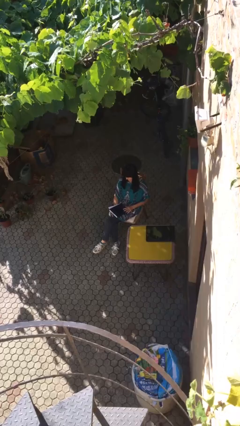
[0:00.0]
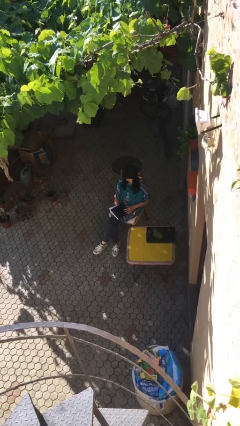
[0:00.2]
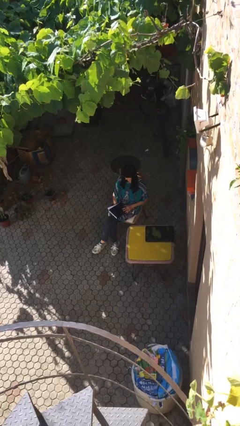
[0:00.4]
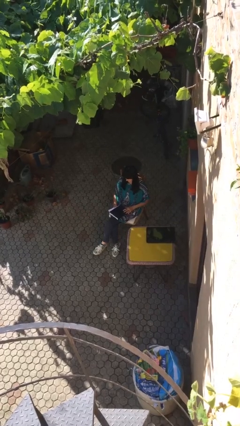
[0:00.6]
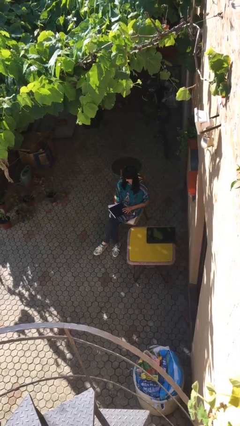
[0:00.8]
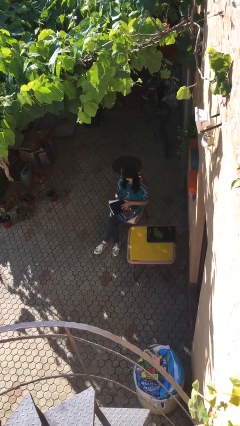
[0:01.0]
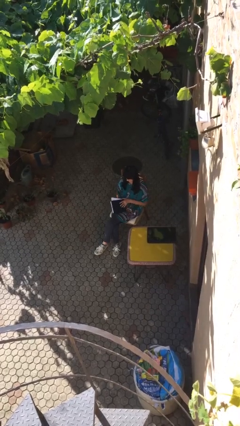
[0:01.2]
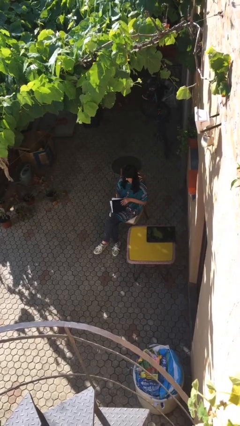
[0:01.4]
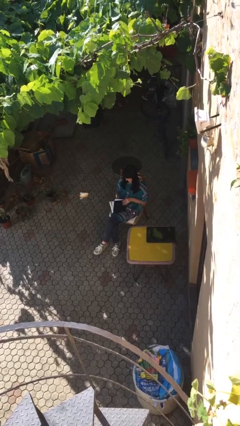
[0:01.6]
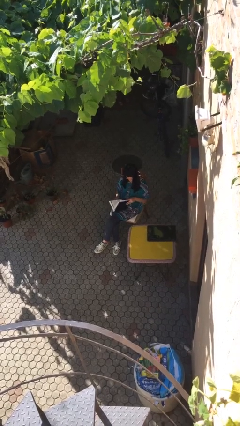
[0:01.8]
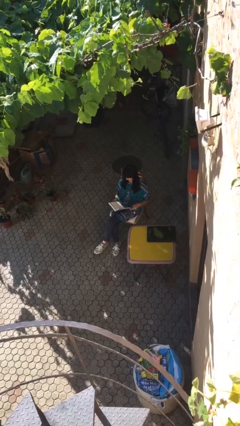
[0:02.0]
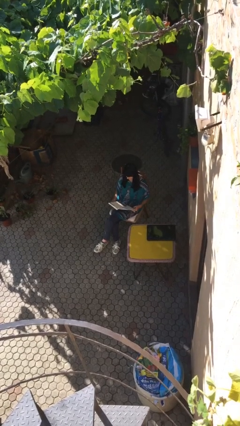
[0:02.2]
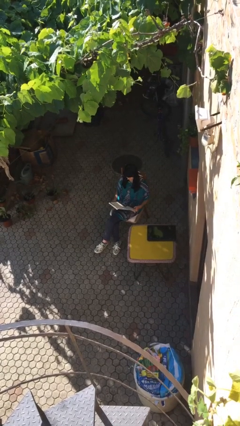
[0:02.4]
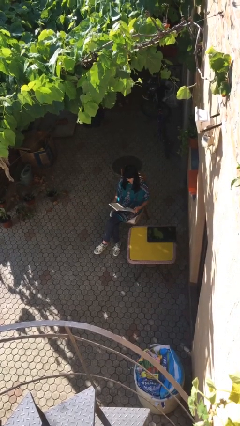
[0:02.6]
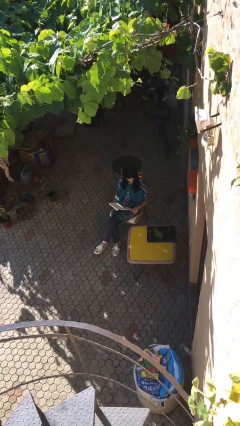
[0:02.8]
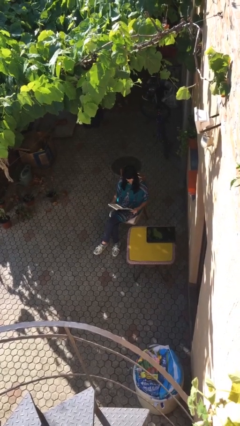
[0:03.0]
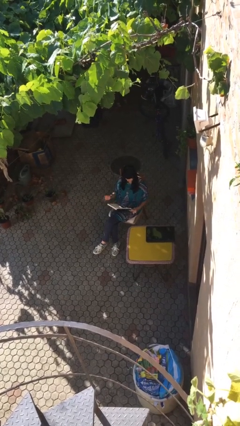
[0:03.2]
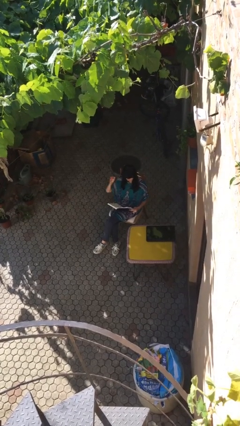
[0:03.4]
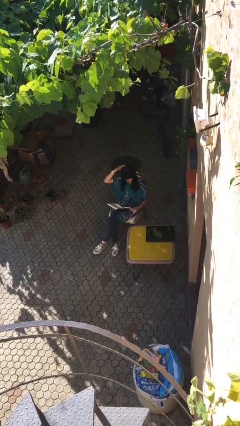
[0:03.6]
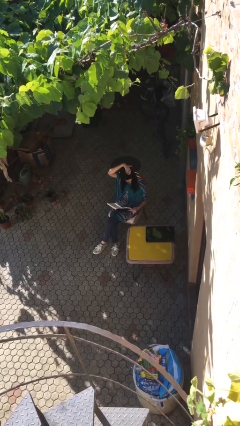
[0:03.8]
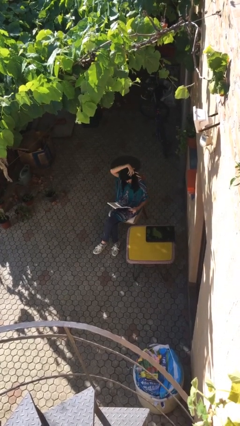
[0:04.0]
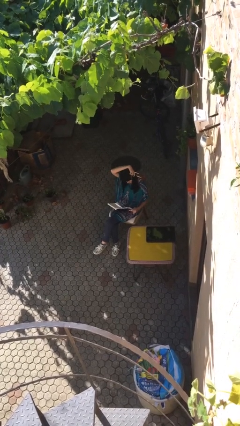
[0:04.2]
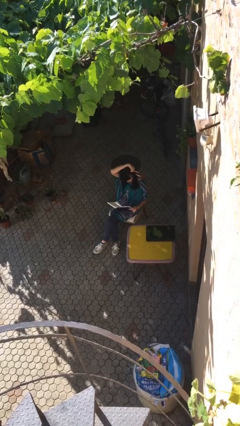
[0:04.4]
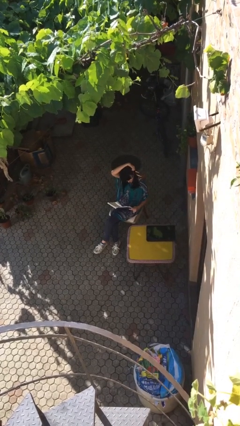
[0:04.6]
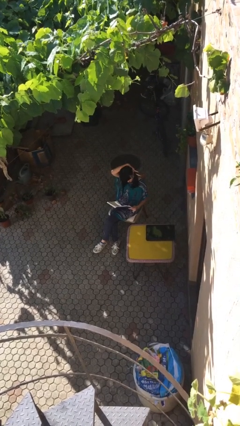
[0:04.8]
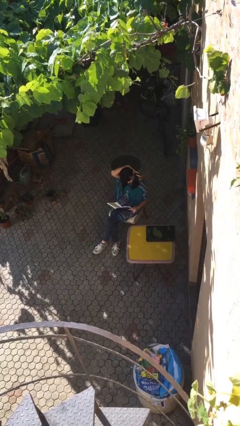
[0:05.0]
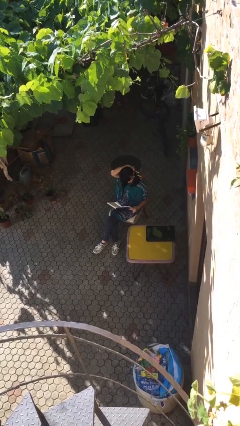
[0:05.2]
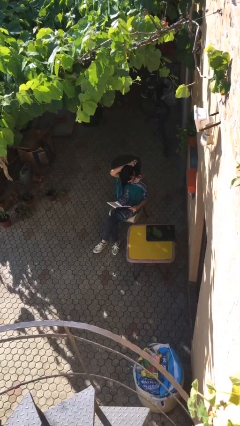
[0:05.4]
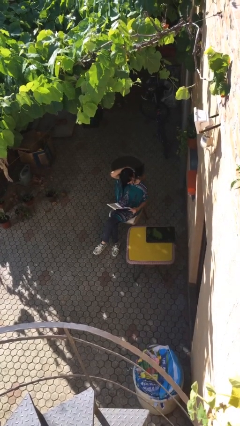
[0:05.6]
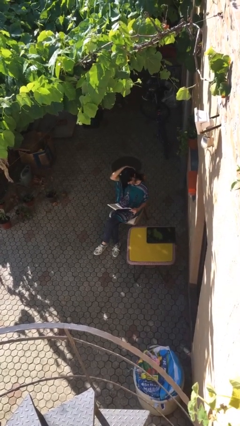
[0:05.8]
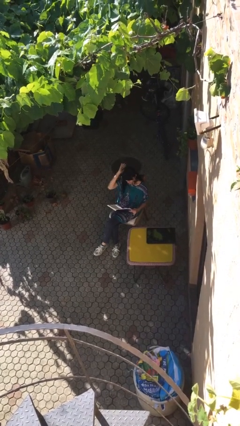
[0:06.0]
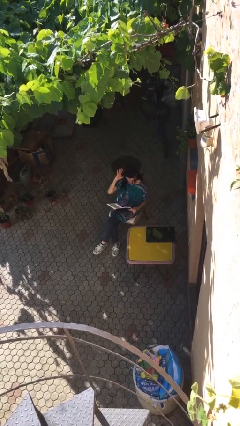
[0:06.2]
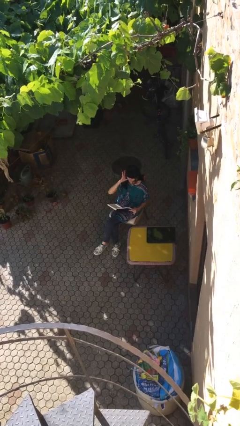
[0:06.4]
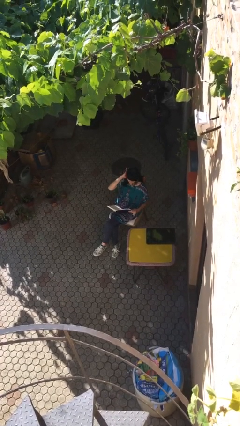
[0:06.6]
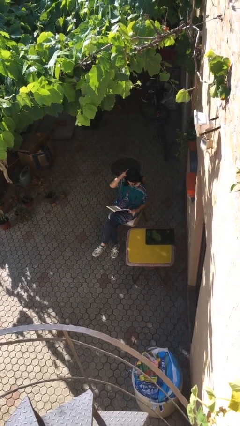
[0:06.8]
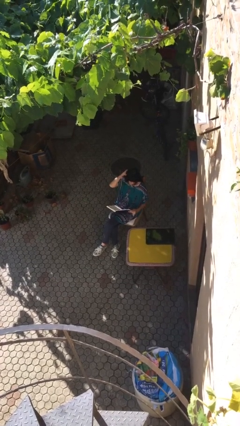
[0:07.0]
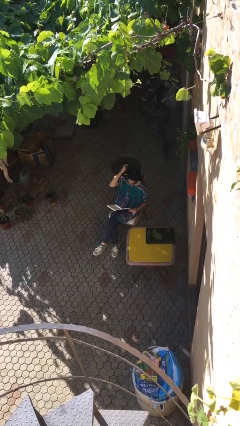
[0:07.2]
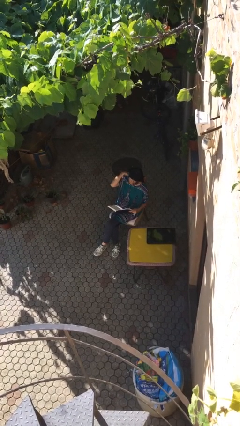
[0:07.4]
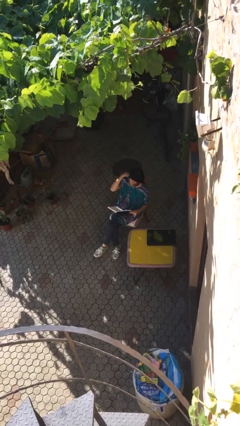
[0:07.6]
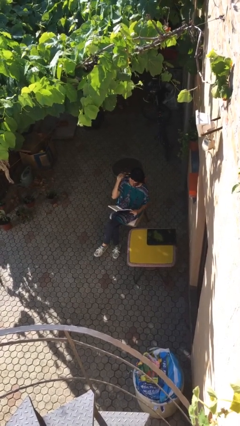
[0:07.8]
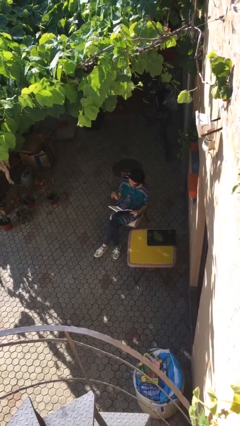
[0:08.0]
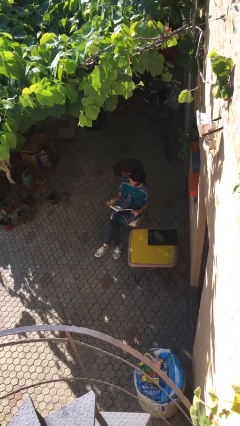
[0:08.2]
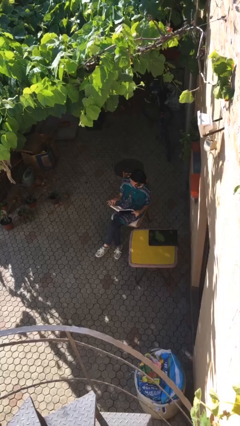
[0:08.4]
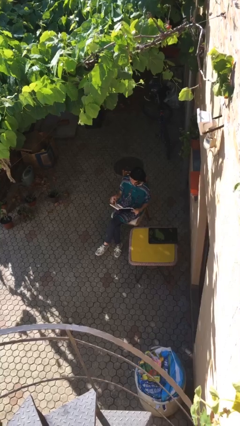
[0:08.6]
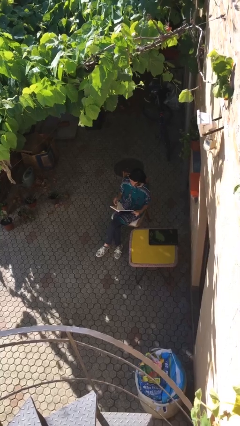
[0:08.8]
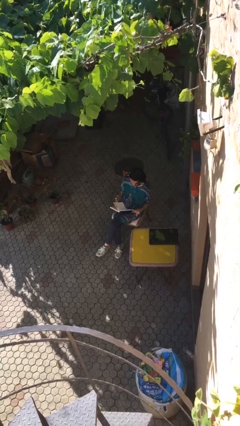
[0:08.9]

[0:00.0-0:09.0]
person reads document

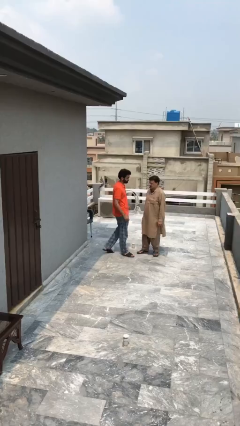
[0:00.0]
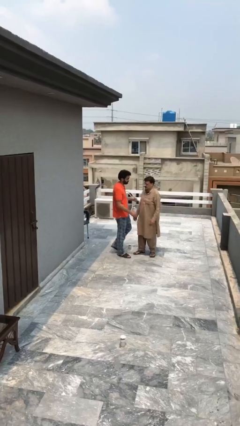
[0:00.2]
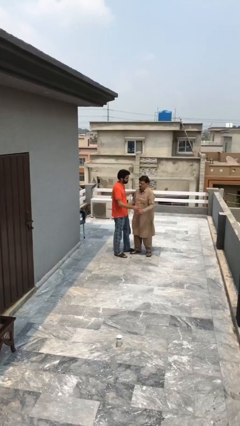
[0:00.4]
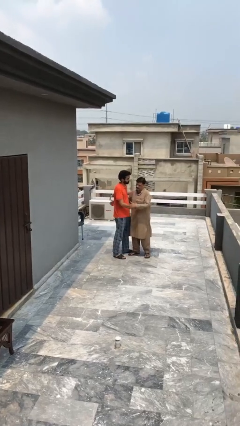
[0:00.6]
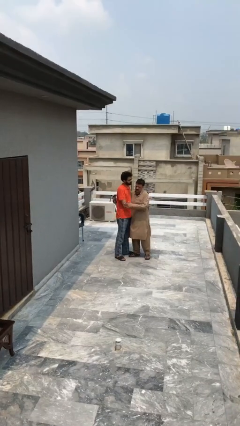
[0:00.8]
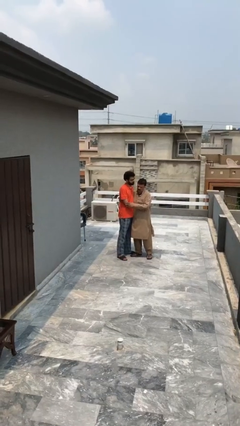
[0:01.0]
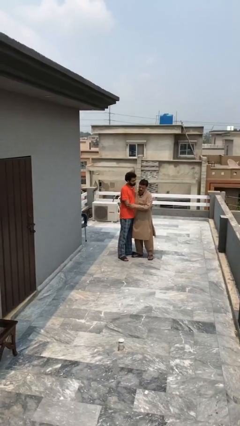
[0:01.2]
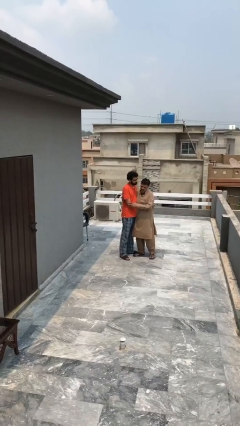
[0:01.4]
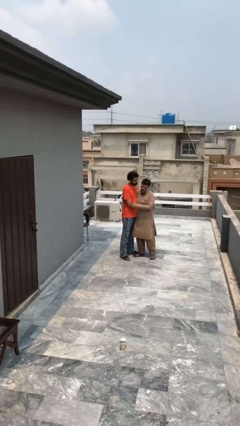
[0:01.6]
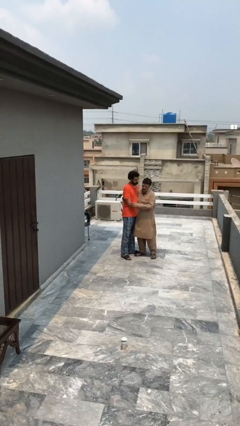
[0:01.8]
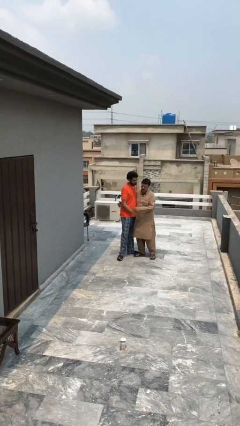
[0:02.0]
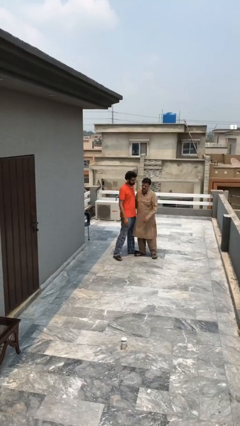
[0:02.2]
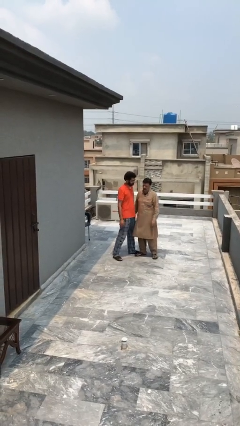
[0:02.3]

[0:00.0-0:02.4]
person embraces person

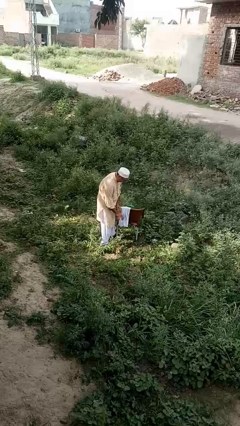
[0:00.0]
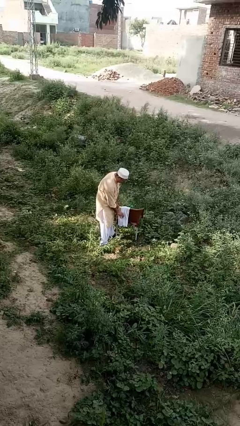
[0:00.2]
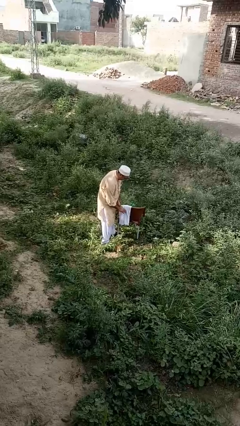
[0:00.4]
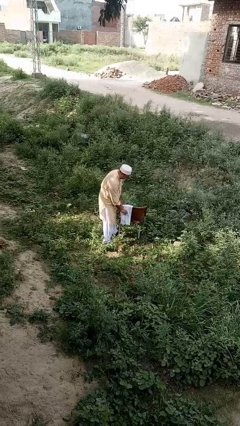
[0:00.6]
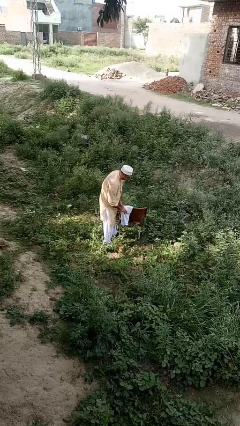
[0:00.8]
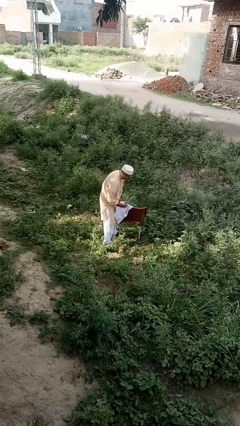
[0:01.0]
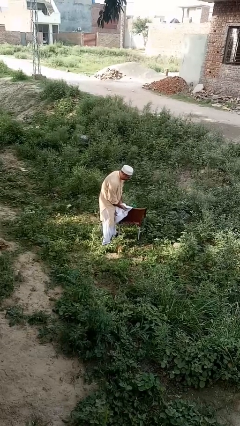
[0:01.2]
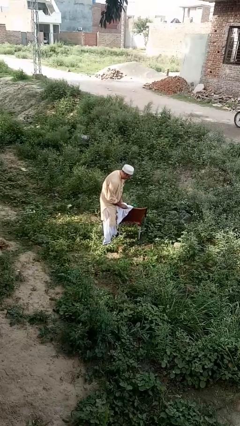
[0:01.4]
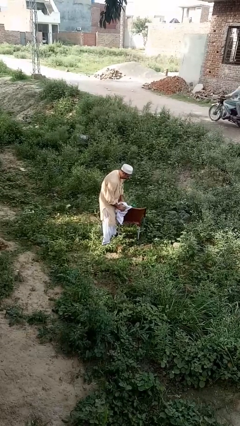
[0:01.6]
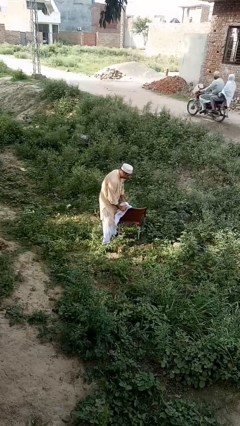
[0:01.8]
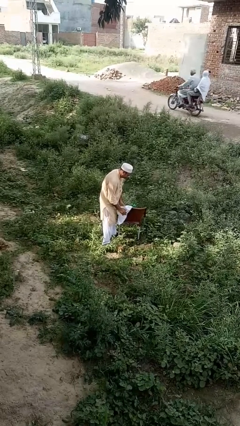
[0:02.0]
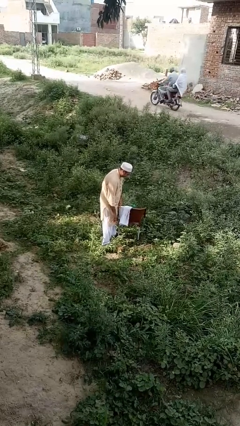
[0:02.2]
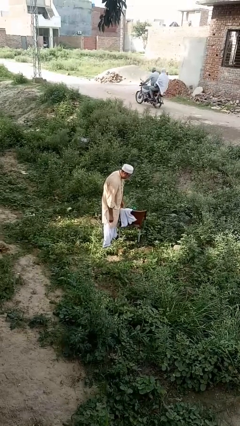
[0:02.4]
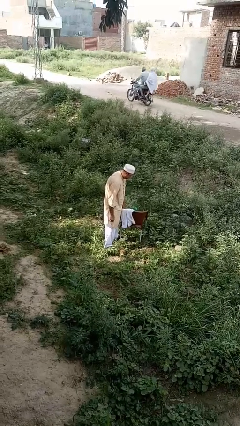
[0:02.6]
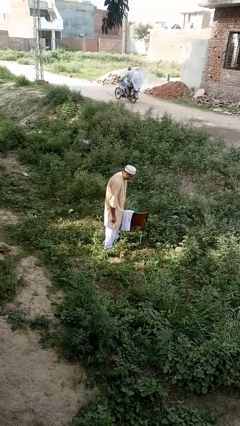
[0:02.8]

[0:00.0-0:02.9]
person dries hands with towel

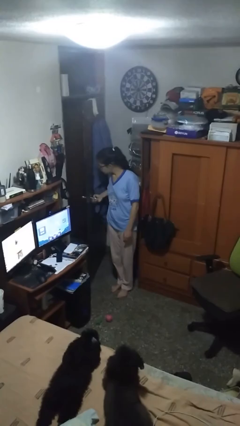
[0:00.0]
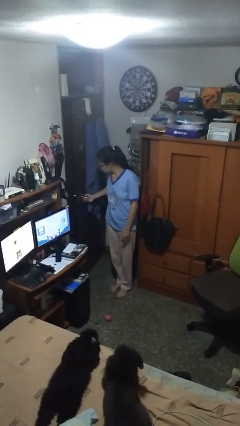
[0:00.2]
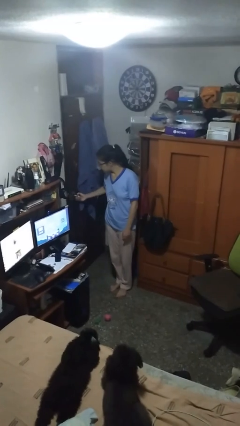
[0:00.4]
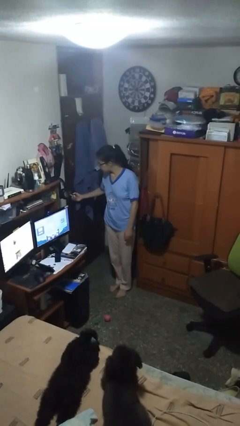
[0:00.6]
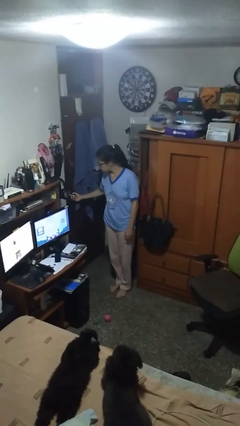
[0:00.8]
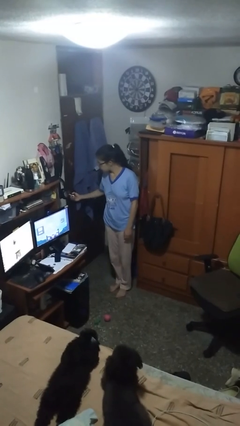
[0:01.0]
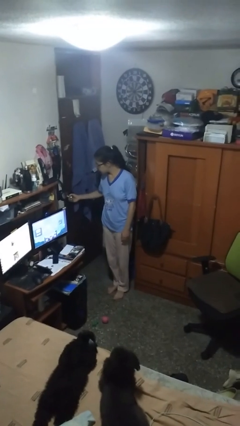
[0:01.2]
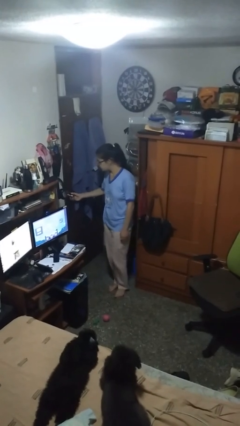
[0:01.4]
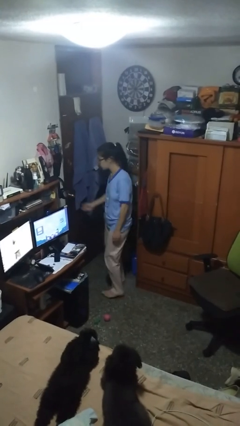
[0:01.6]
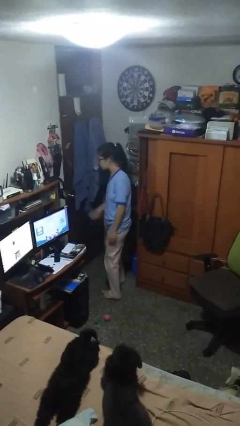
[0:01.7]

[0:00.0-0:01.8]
person closes facility door

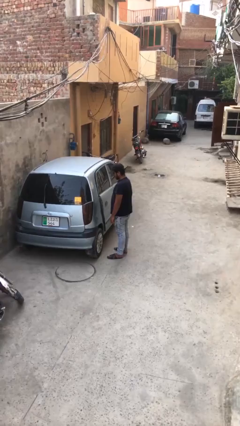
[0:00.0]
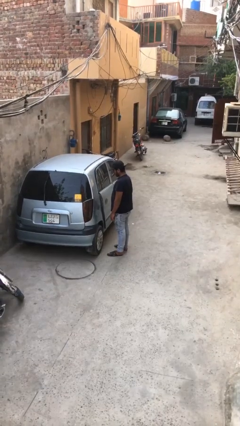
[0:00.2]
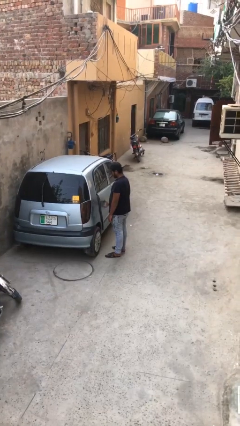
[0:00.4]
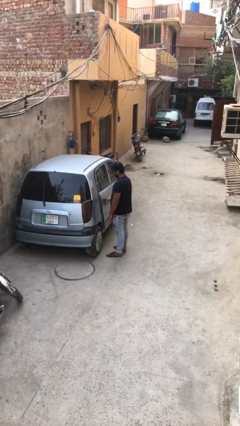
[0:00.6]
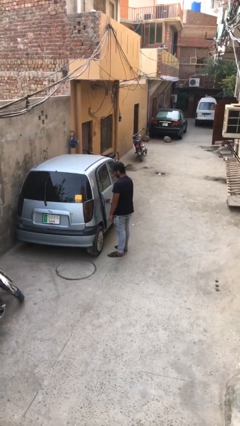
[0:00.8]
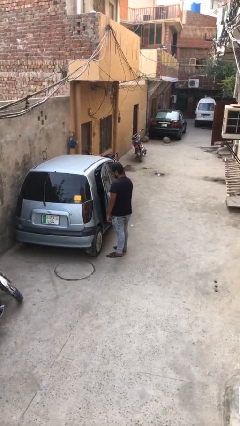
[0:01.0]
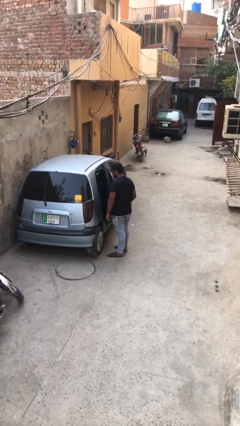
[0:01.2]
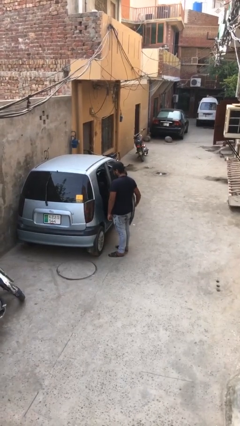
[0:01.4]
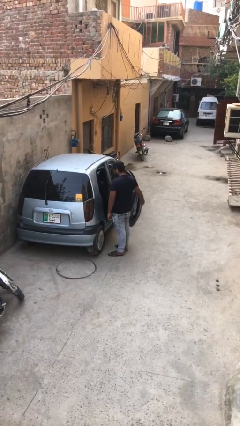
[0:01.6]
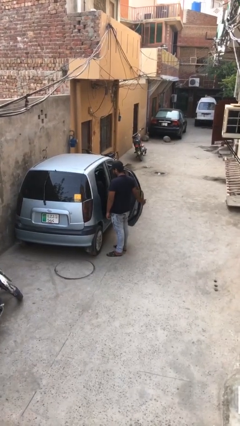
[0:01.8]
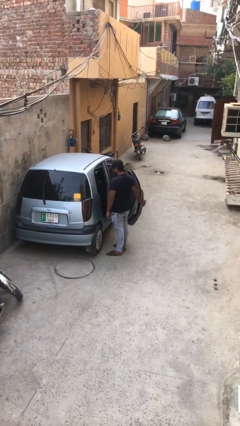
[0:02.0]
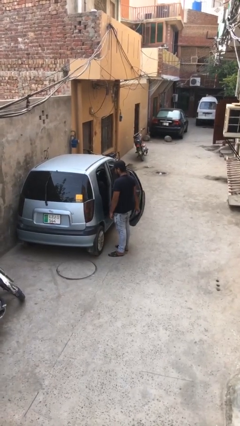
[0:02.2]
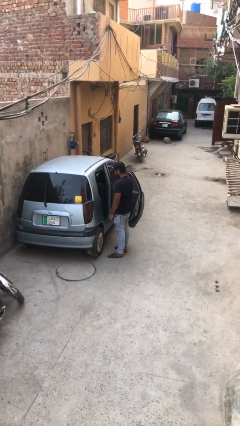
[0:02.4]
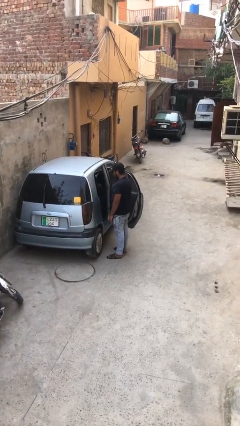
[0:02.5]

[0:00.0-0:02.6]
person opens car door
